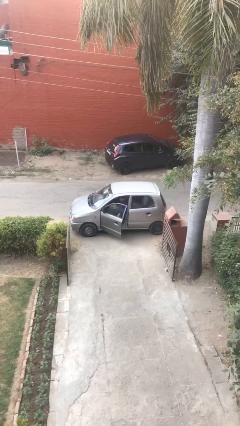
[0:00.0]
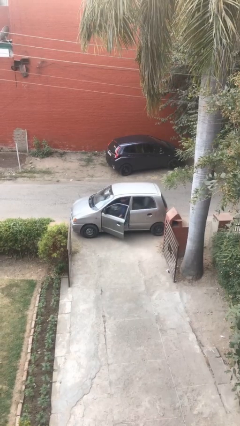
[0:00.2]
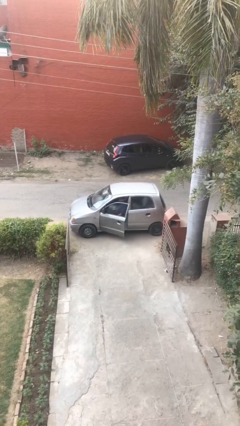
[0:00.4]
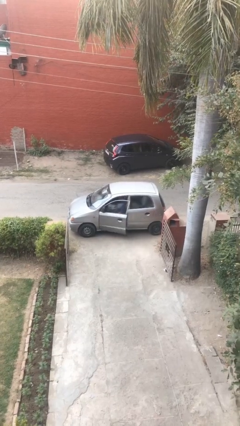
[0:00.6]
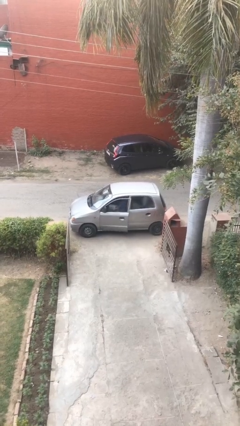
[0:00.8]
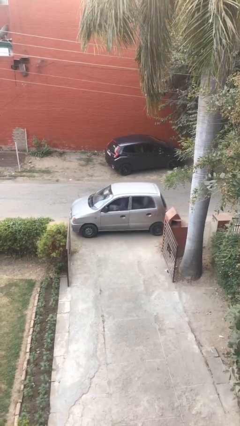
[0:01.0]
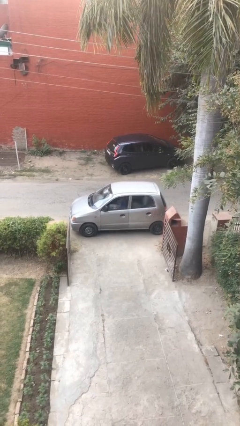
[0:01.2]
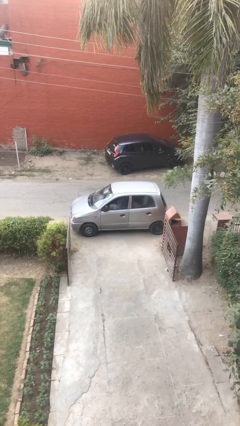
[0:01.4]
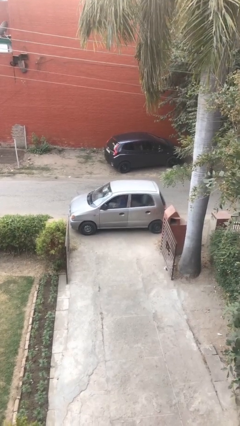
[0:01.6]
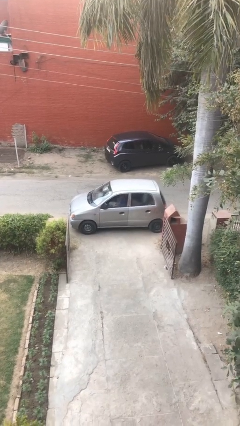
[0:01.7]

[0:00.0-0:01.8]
person closes car door

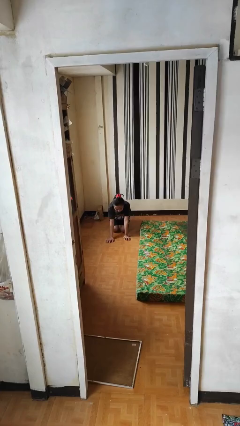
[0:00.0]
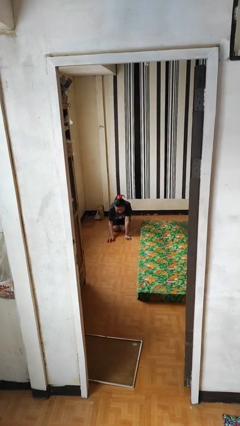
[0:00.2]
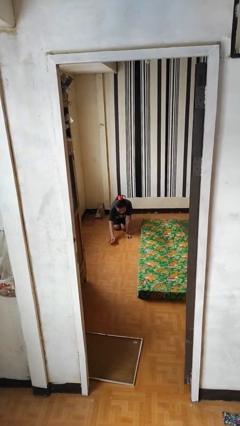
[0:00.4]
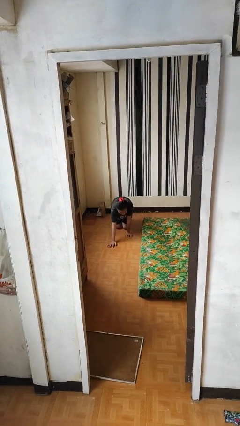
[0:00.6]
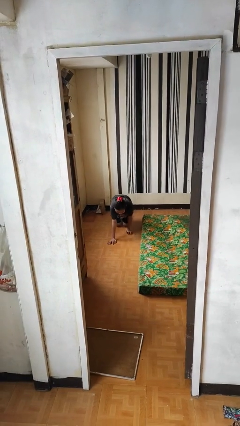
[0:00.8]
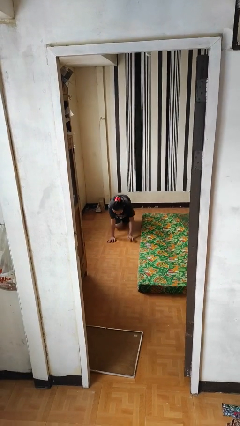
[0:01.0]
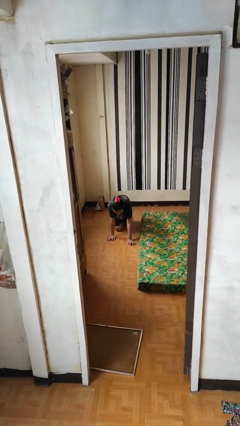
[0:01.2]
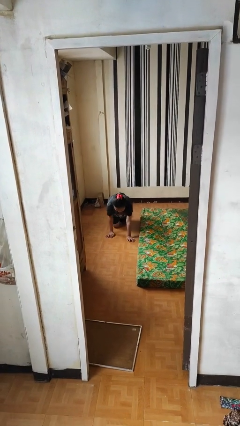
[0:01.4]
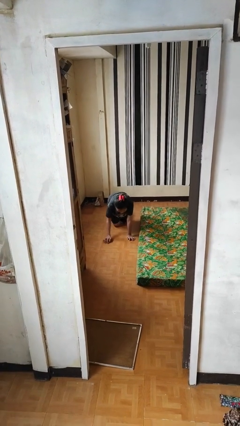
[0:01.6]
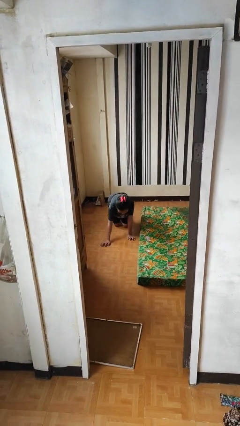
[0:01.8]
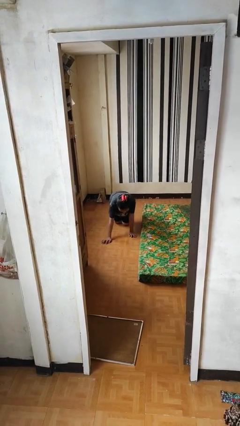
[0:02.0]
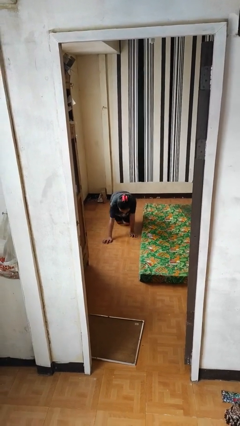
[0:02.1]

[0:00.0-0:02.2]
person crawls

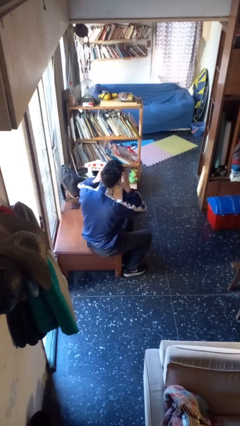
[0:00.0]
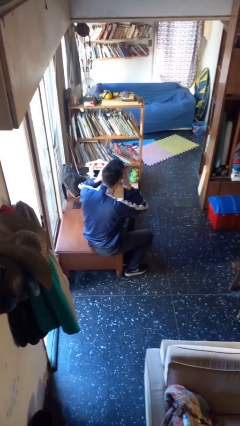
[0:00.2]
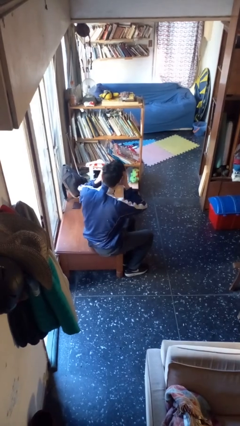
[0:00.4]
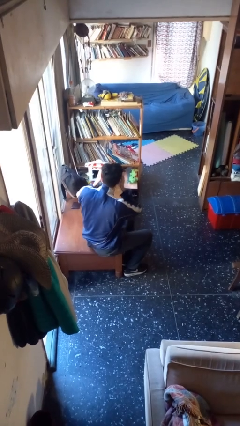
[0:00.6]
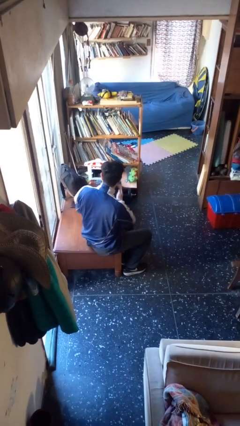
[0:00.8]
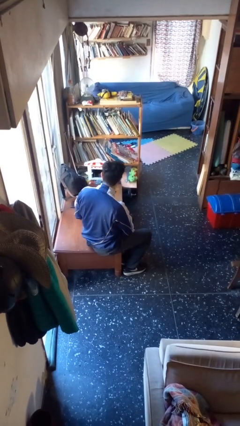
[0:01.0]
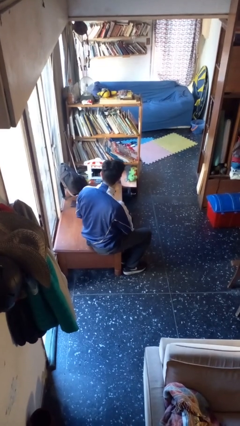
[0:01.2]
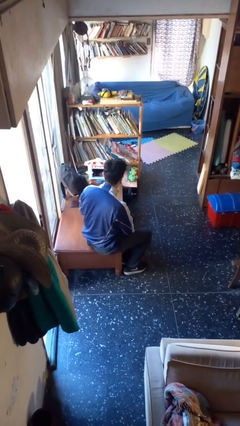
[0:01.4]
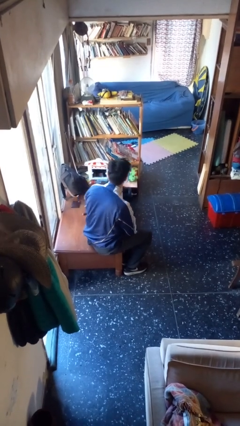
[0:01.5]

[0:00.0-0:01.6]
person takes off facemask

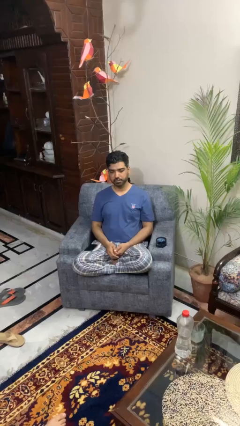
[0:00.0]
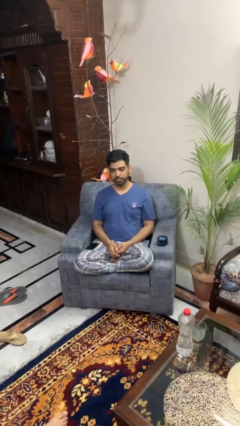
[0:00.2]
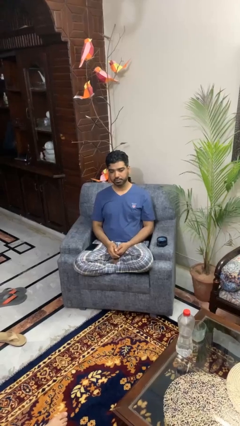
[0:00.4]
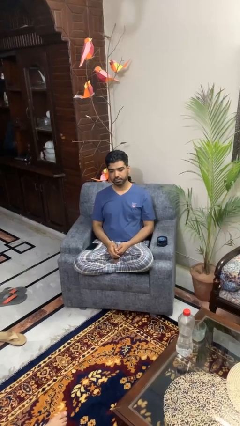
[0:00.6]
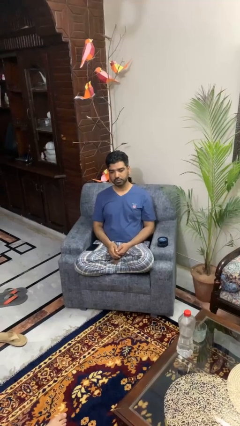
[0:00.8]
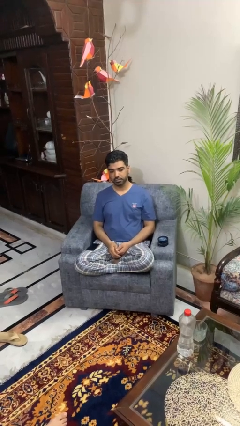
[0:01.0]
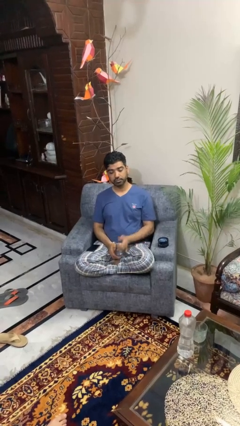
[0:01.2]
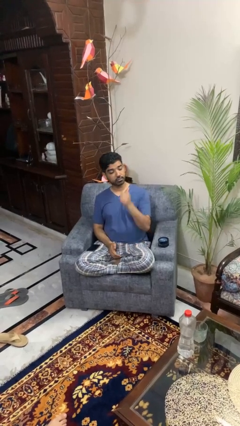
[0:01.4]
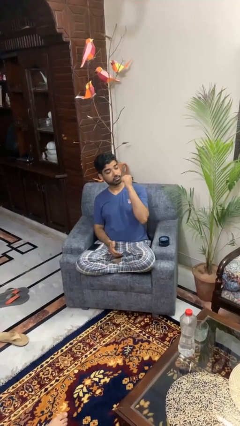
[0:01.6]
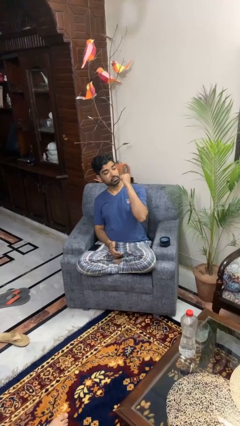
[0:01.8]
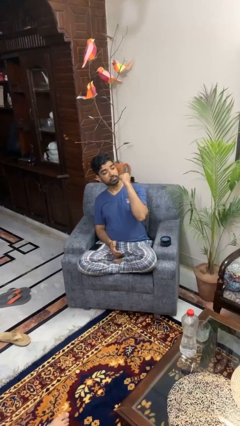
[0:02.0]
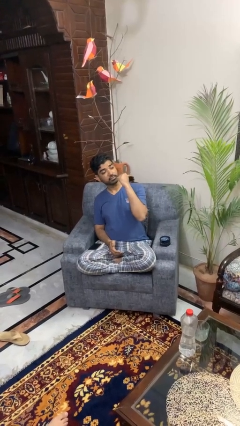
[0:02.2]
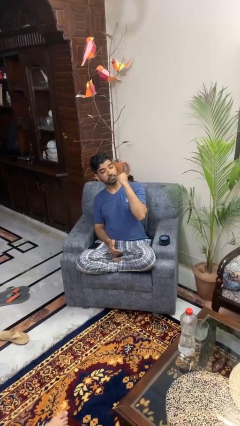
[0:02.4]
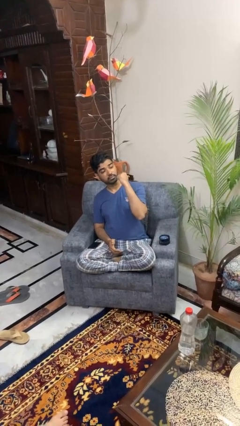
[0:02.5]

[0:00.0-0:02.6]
person gestures behind me

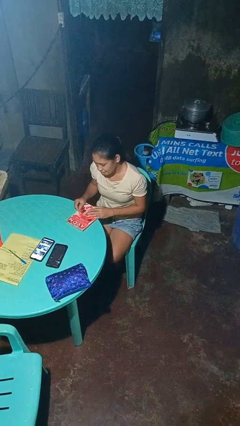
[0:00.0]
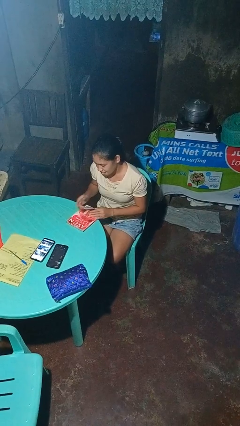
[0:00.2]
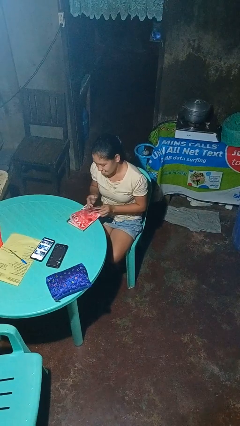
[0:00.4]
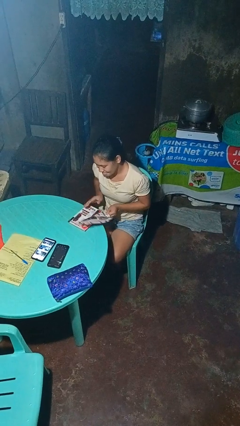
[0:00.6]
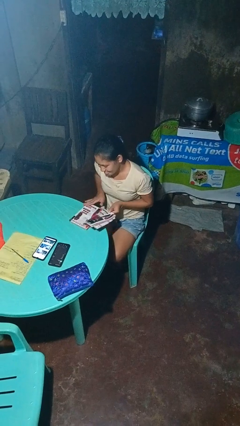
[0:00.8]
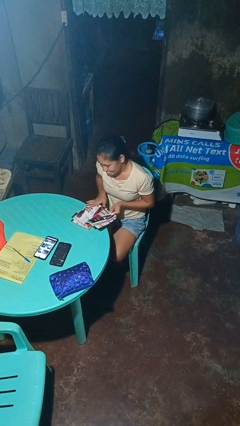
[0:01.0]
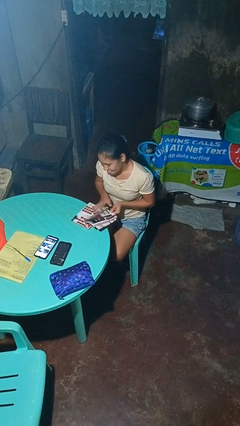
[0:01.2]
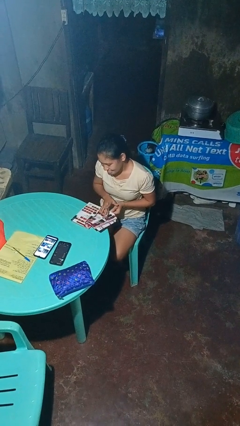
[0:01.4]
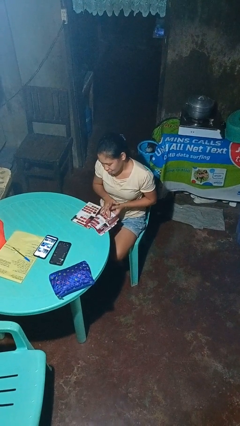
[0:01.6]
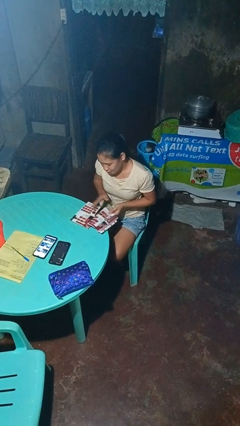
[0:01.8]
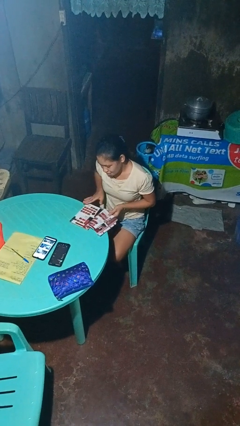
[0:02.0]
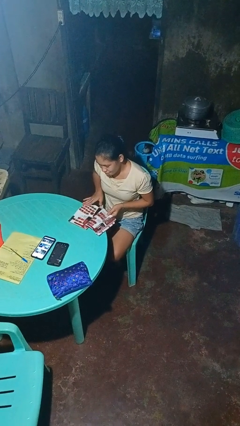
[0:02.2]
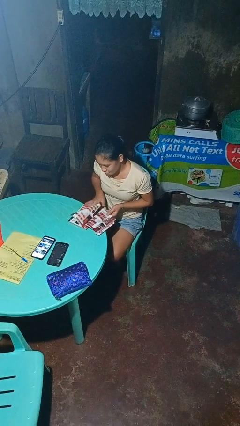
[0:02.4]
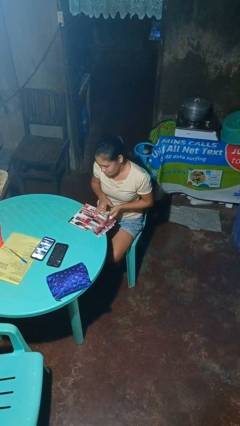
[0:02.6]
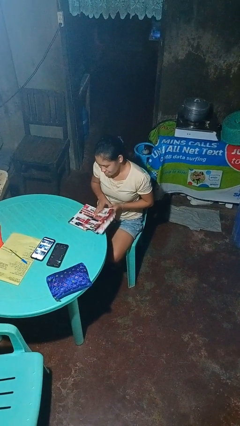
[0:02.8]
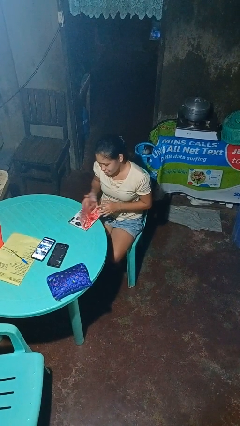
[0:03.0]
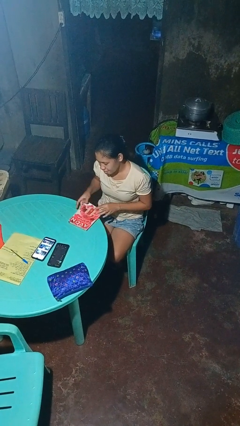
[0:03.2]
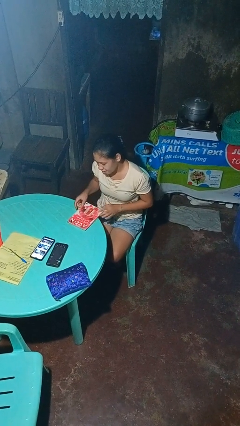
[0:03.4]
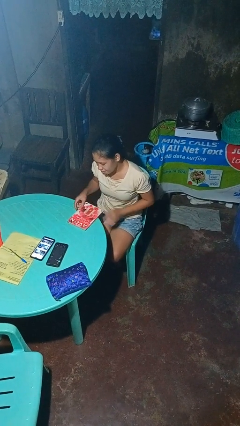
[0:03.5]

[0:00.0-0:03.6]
person reads magazine

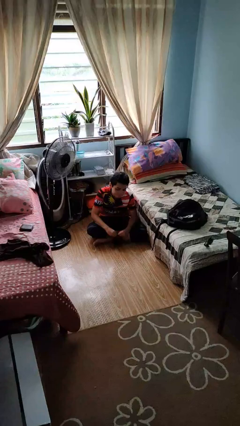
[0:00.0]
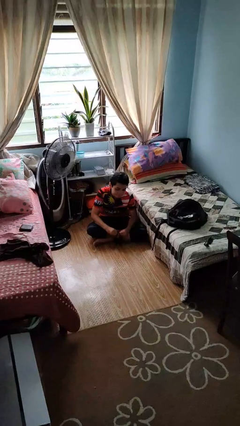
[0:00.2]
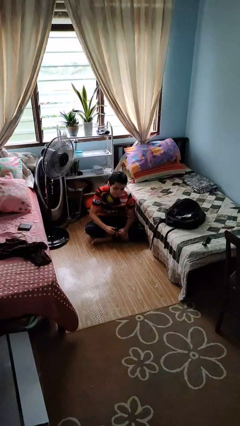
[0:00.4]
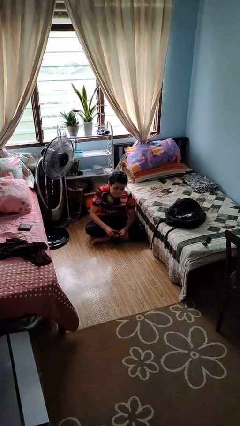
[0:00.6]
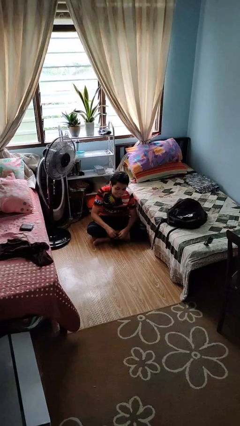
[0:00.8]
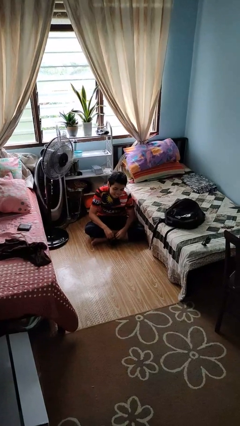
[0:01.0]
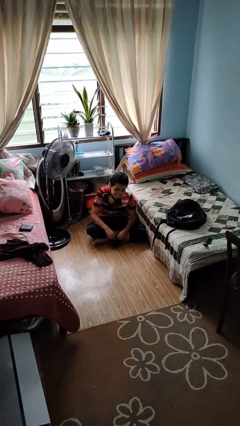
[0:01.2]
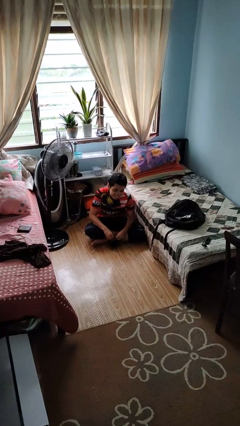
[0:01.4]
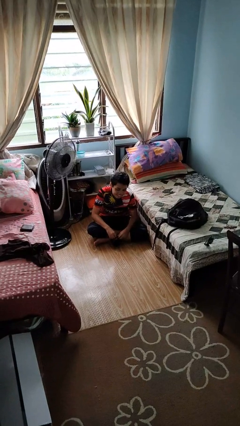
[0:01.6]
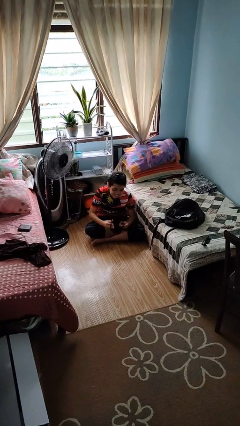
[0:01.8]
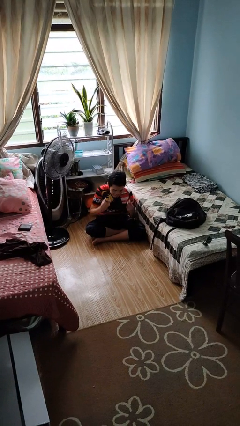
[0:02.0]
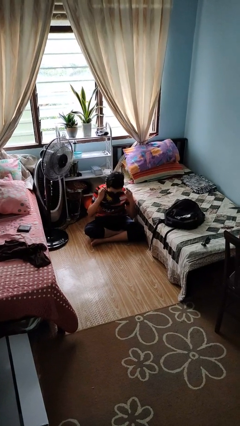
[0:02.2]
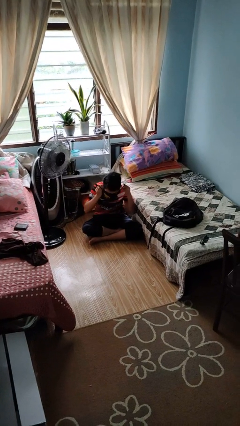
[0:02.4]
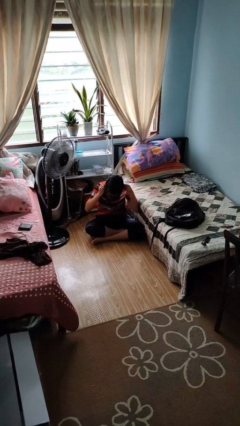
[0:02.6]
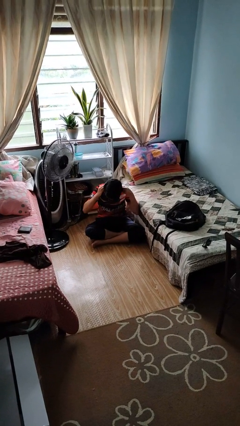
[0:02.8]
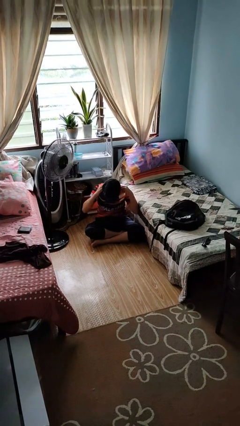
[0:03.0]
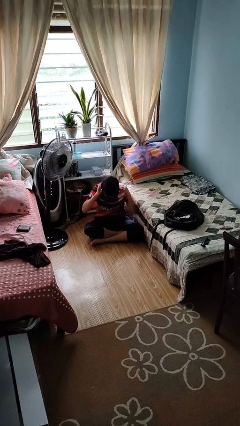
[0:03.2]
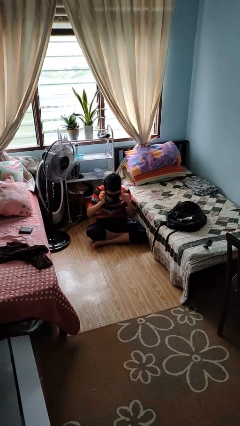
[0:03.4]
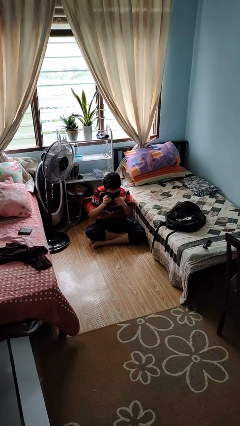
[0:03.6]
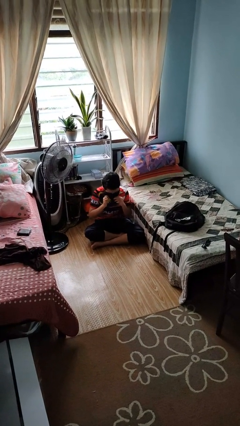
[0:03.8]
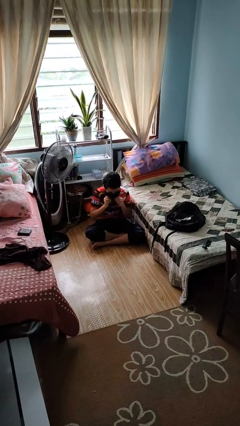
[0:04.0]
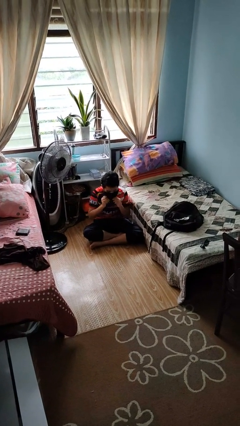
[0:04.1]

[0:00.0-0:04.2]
person puts on facemask

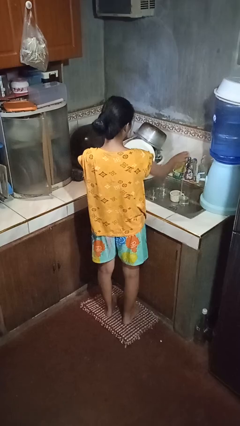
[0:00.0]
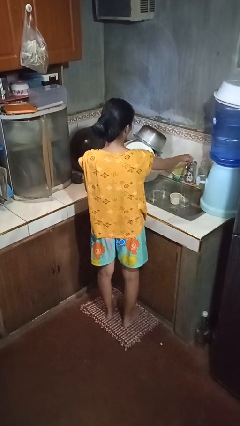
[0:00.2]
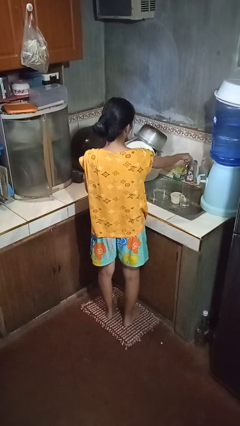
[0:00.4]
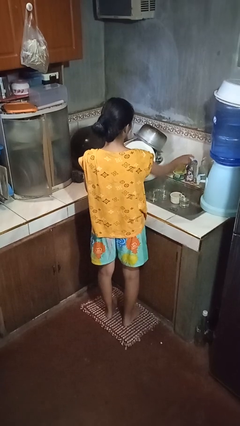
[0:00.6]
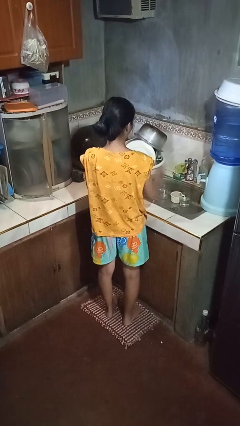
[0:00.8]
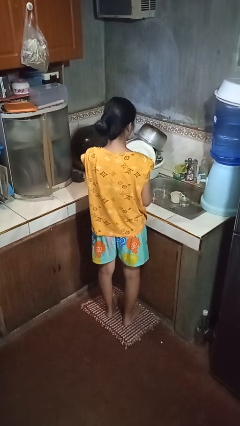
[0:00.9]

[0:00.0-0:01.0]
person turns off faucet
